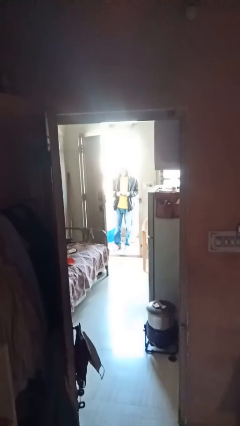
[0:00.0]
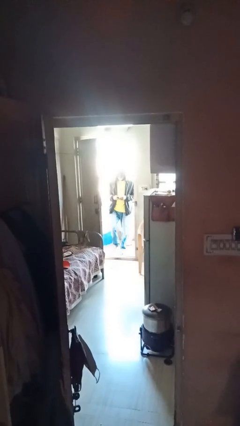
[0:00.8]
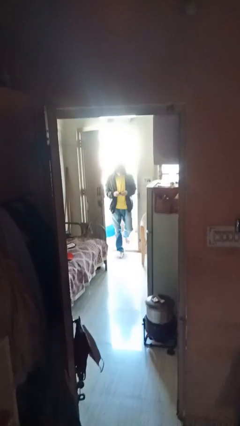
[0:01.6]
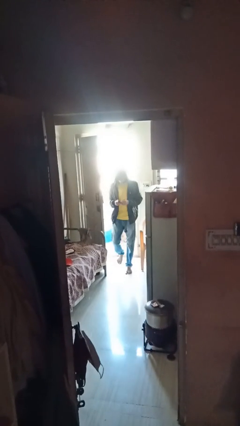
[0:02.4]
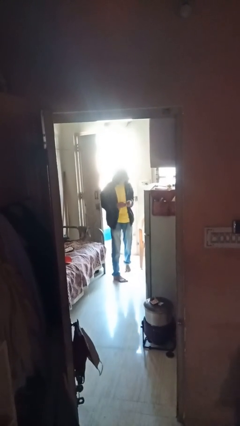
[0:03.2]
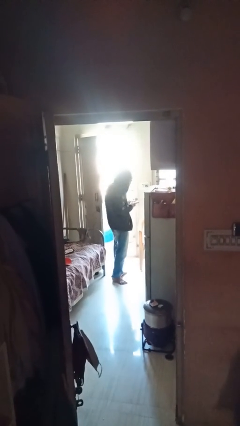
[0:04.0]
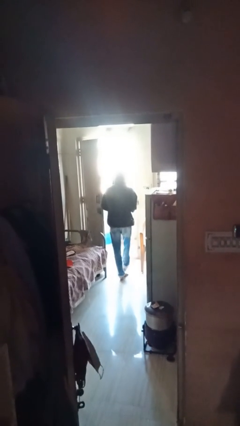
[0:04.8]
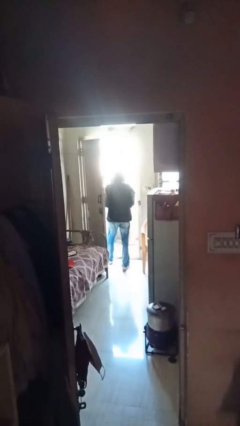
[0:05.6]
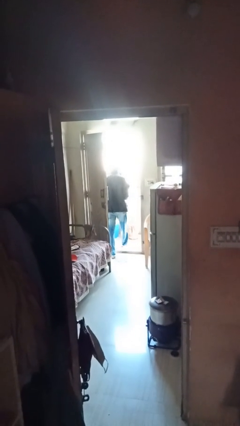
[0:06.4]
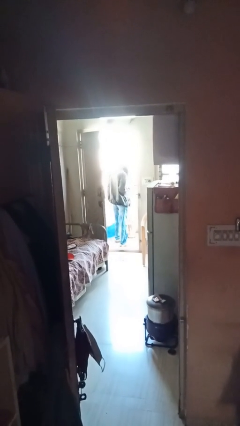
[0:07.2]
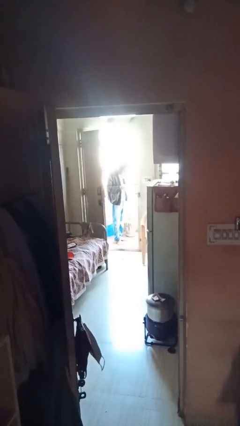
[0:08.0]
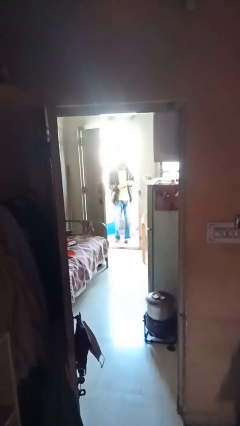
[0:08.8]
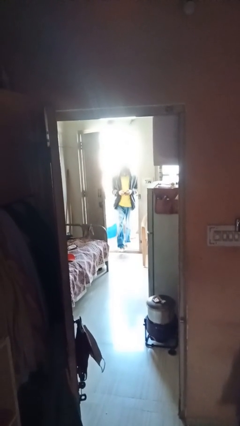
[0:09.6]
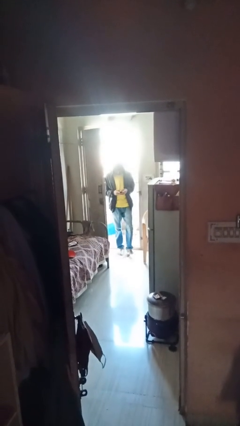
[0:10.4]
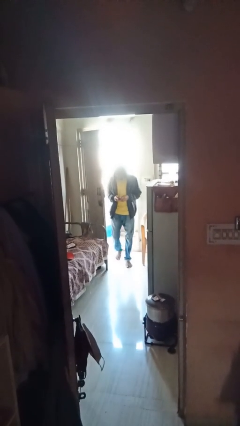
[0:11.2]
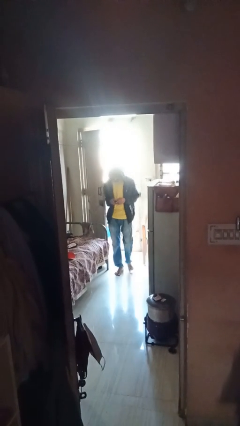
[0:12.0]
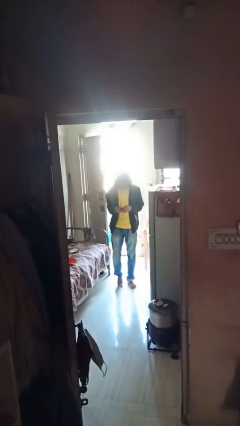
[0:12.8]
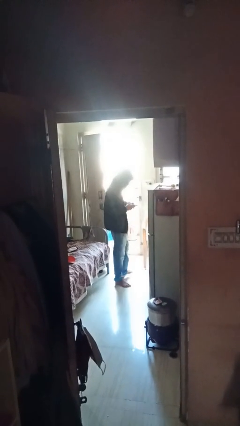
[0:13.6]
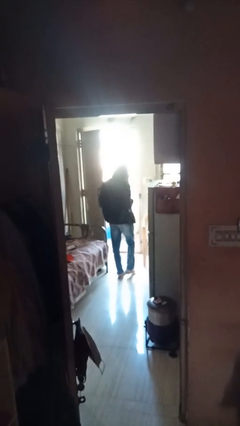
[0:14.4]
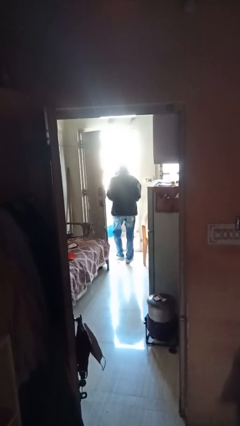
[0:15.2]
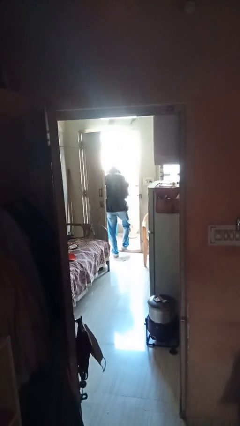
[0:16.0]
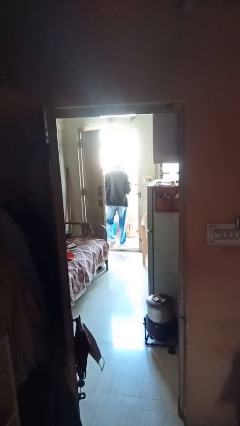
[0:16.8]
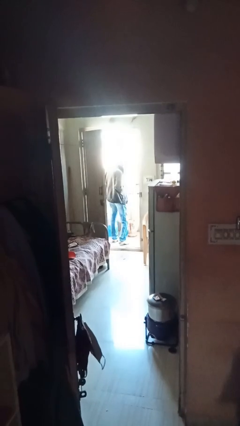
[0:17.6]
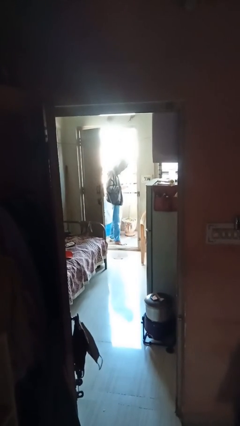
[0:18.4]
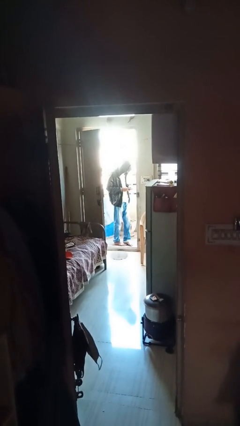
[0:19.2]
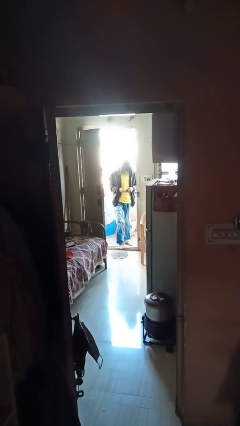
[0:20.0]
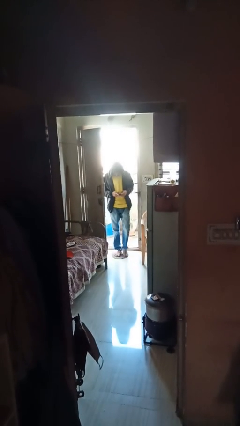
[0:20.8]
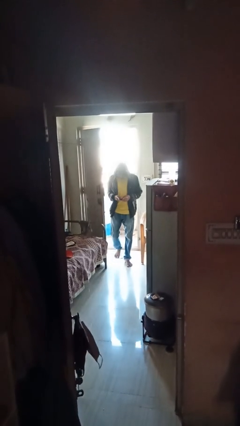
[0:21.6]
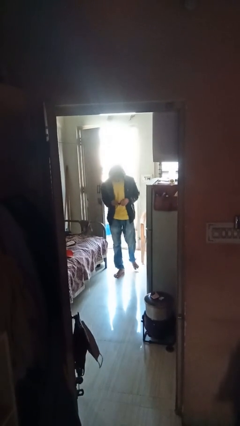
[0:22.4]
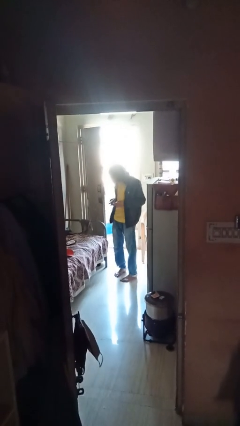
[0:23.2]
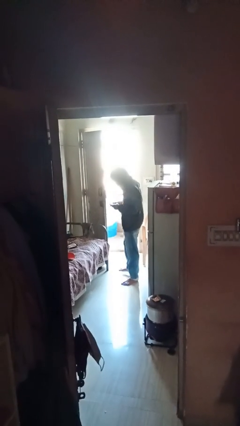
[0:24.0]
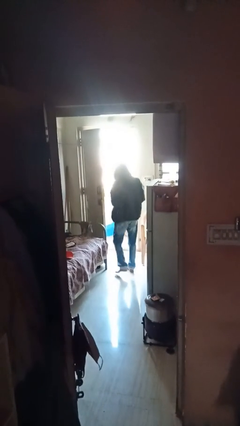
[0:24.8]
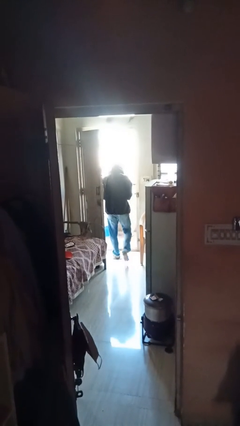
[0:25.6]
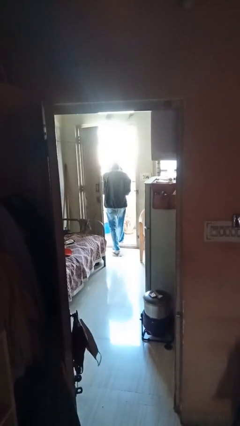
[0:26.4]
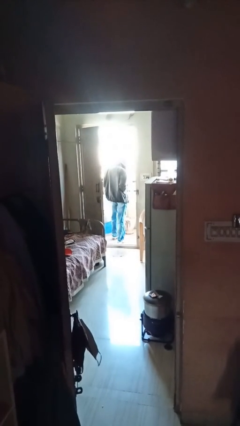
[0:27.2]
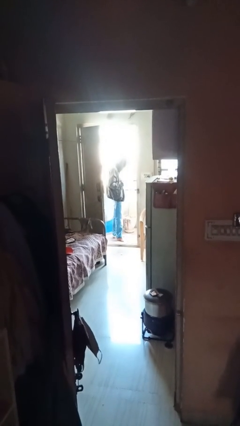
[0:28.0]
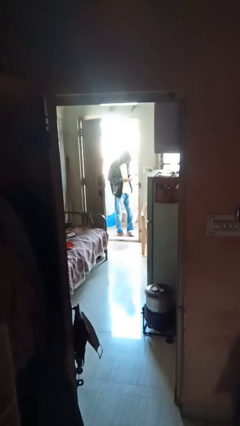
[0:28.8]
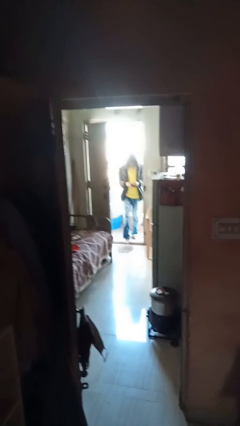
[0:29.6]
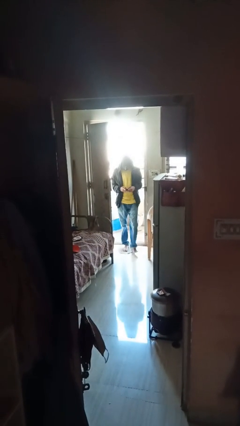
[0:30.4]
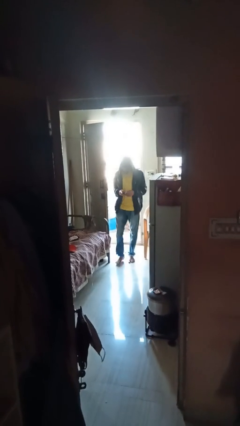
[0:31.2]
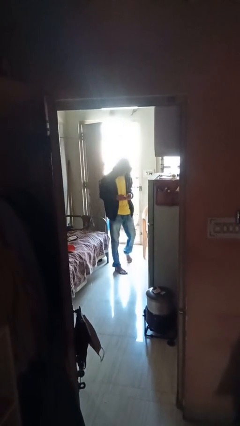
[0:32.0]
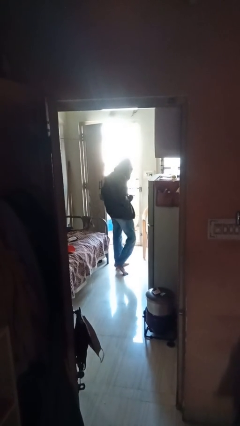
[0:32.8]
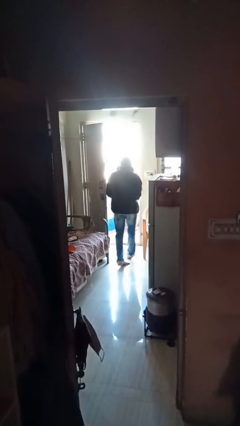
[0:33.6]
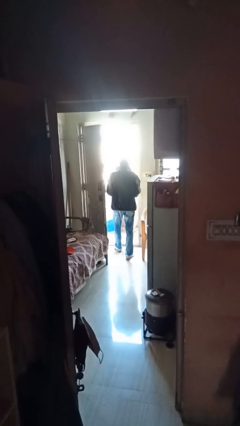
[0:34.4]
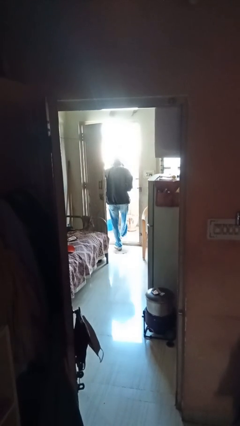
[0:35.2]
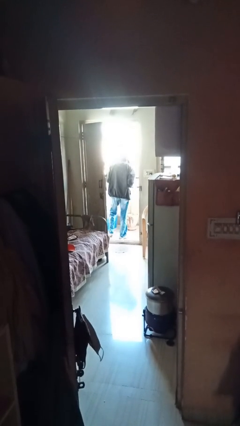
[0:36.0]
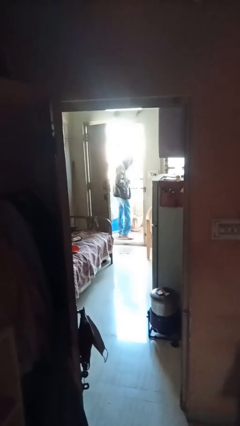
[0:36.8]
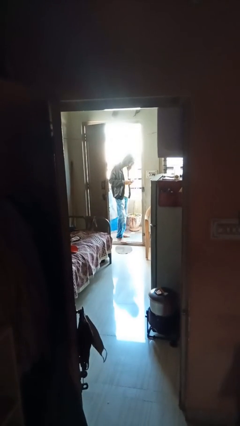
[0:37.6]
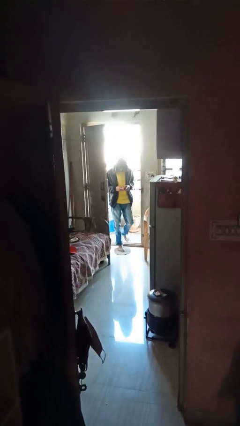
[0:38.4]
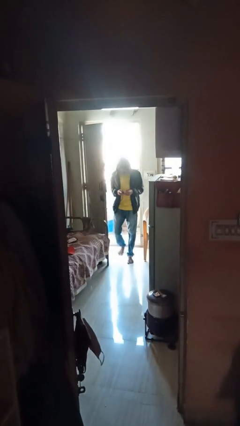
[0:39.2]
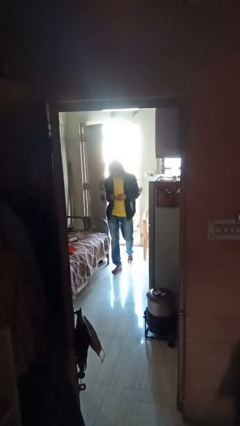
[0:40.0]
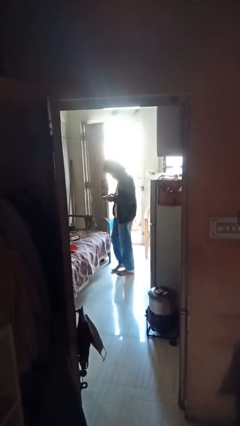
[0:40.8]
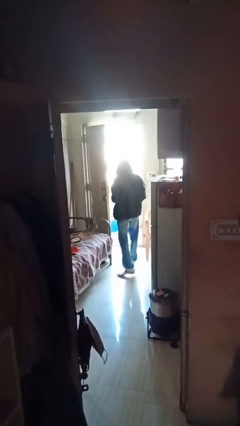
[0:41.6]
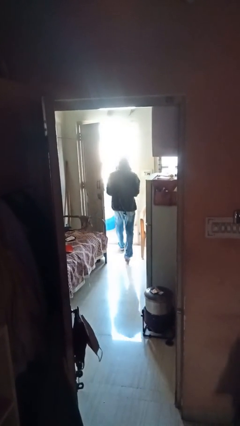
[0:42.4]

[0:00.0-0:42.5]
person texts on phone

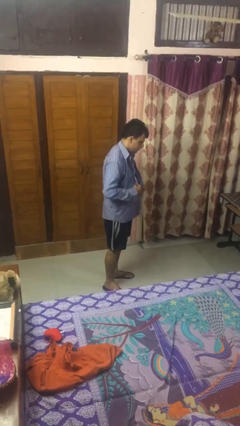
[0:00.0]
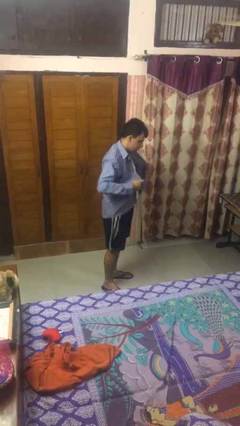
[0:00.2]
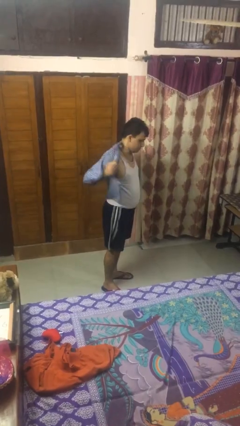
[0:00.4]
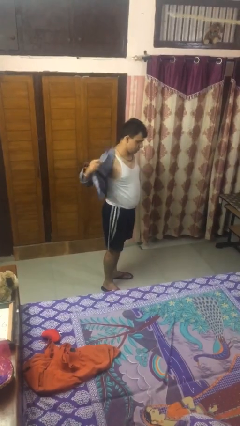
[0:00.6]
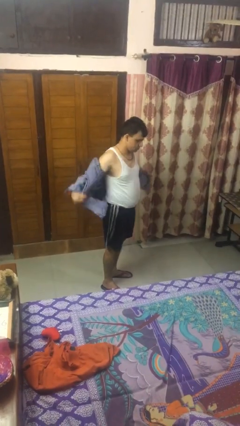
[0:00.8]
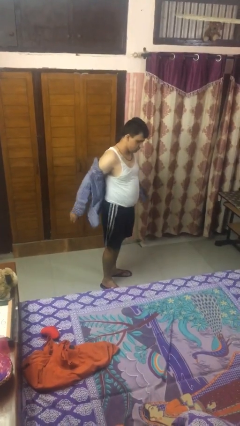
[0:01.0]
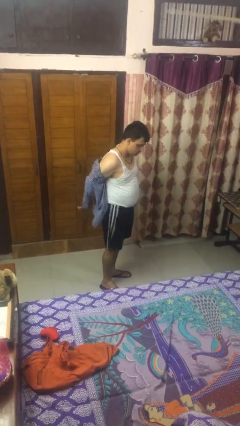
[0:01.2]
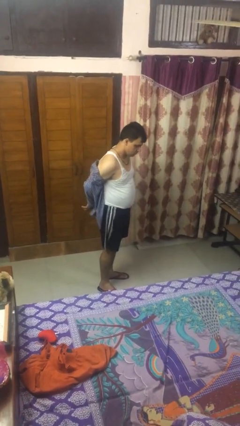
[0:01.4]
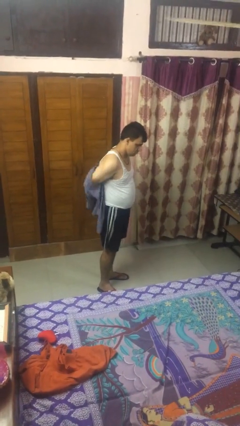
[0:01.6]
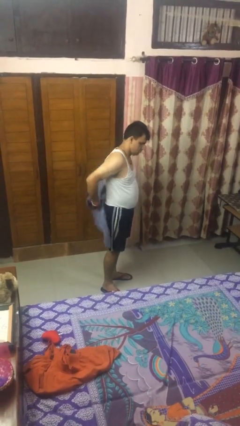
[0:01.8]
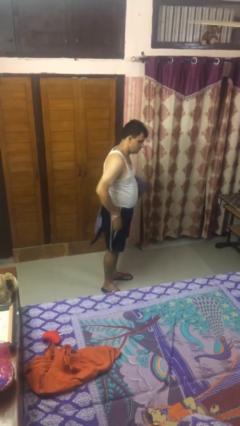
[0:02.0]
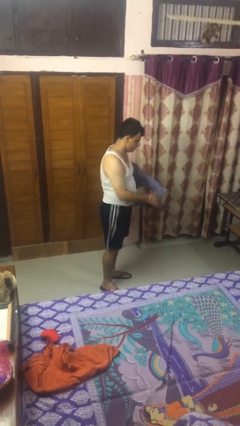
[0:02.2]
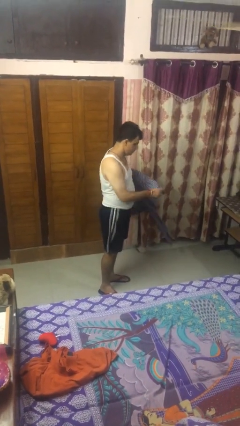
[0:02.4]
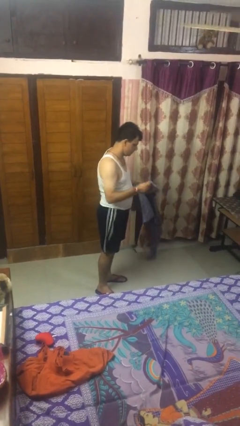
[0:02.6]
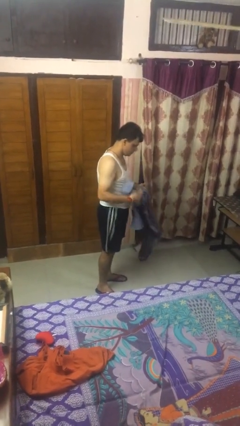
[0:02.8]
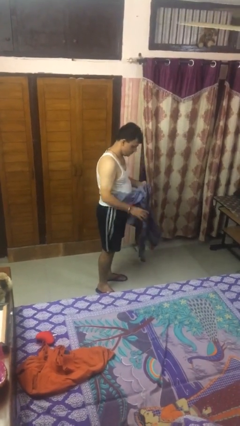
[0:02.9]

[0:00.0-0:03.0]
person takes off shirt

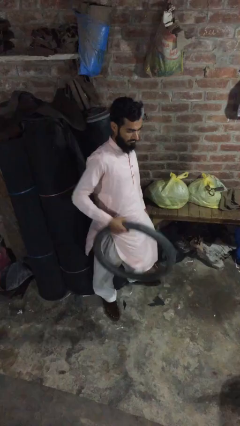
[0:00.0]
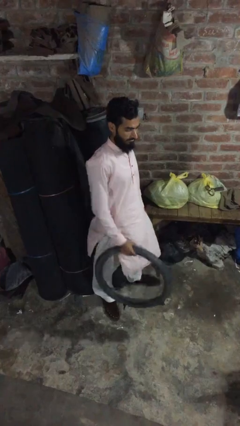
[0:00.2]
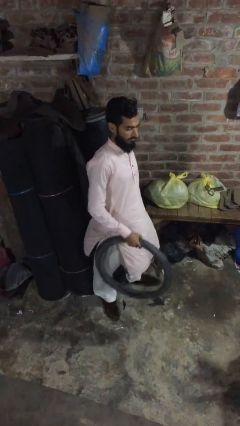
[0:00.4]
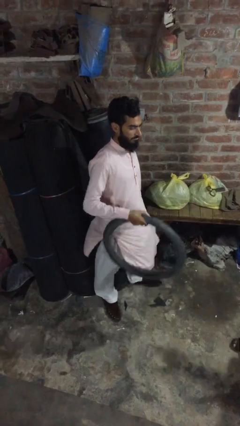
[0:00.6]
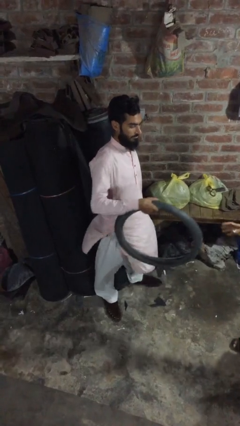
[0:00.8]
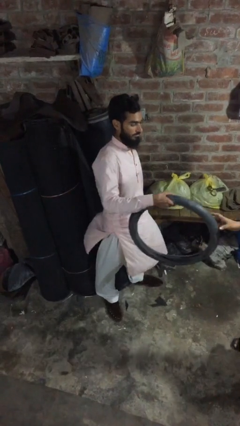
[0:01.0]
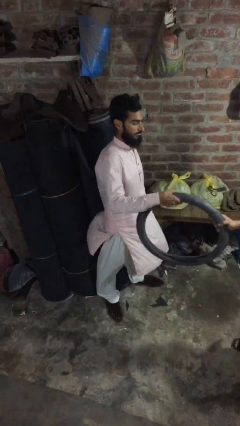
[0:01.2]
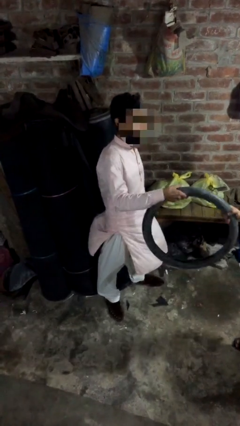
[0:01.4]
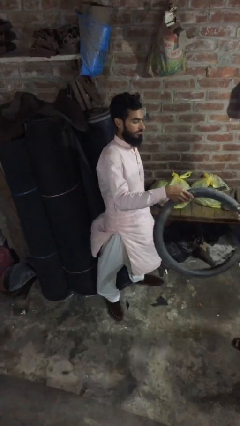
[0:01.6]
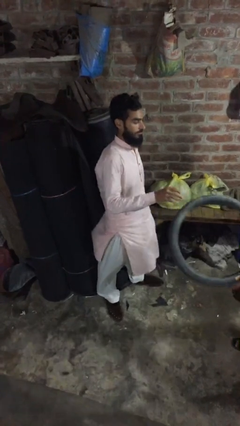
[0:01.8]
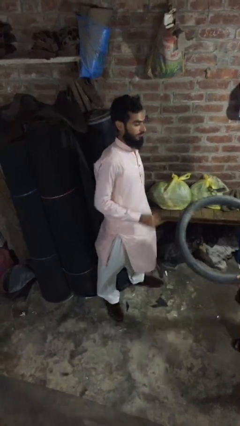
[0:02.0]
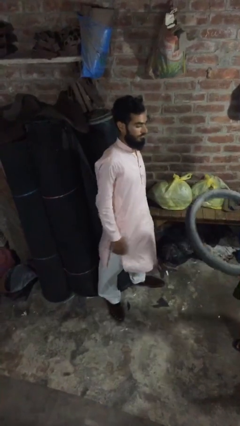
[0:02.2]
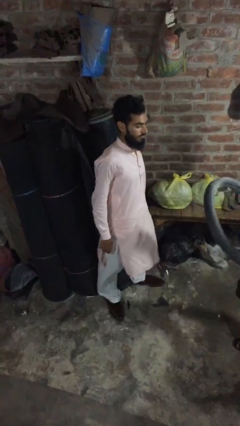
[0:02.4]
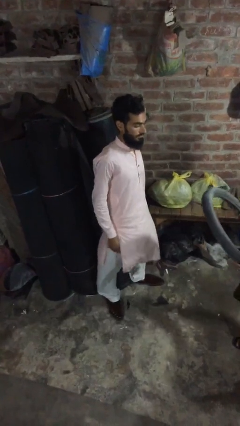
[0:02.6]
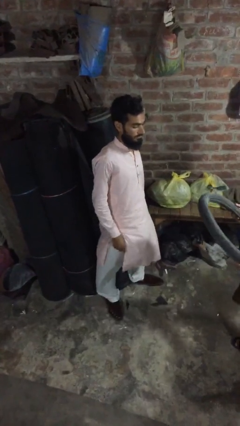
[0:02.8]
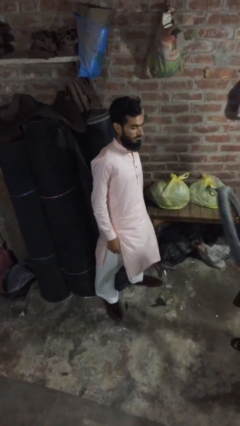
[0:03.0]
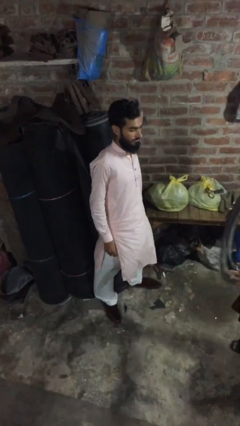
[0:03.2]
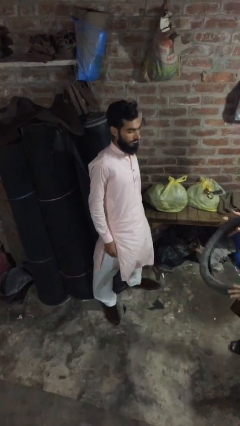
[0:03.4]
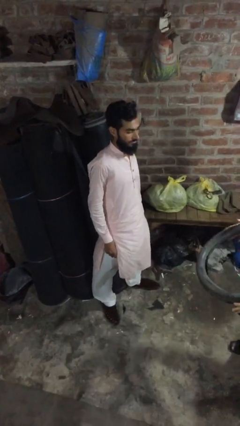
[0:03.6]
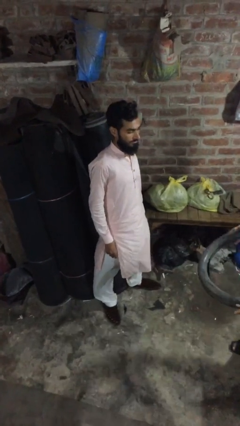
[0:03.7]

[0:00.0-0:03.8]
person transfers object to person

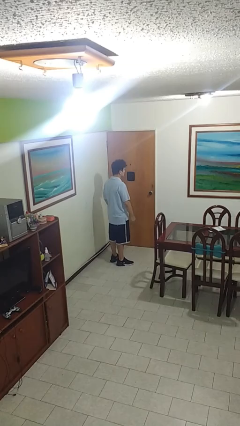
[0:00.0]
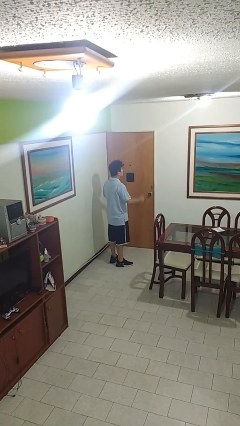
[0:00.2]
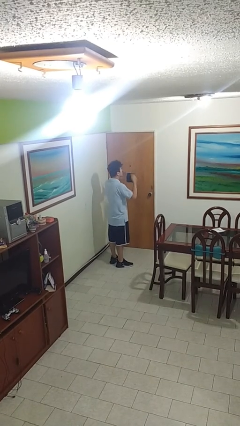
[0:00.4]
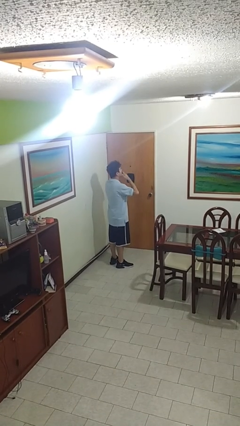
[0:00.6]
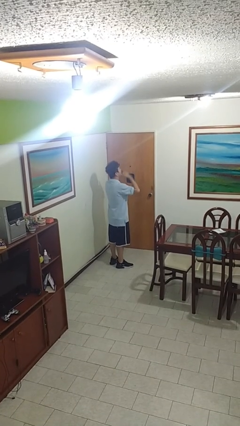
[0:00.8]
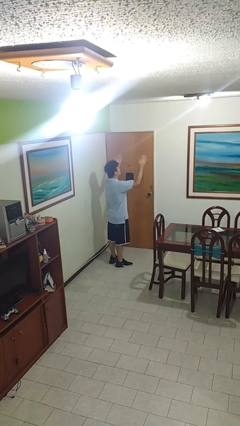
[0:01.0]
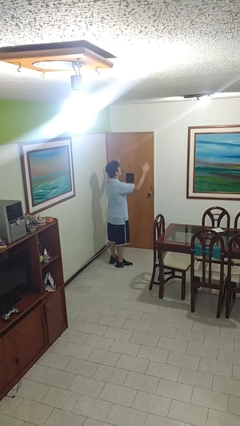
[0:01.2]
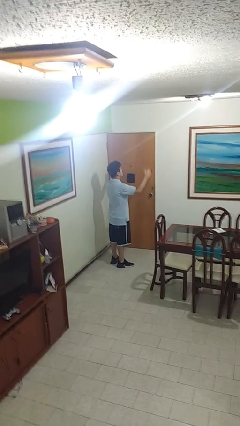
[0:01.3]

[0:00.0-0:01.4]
person gestures blow kiss
